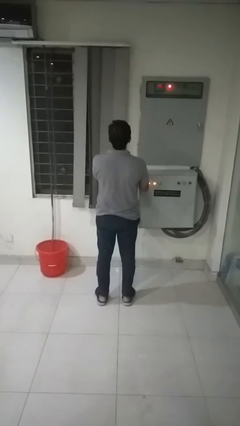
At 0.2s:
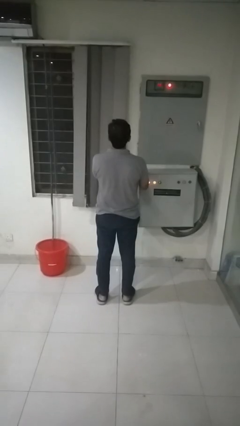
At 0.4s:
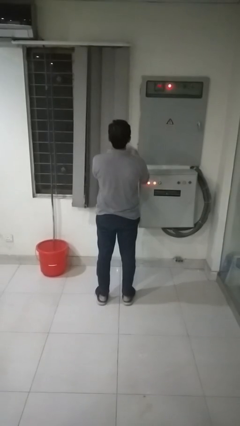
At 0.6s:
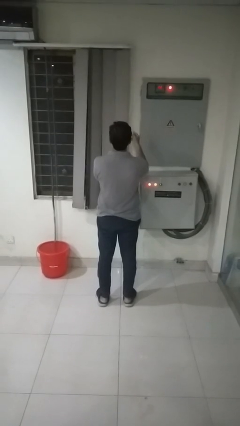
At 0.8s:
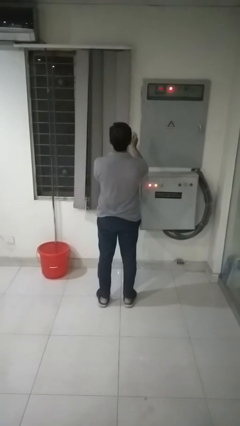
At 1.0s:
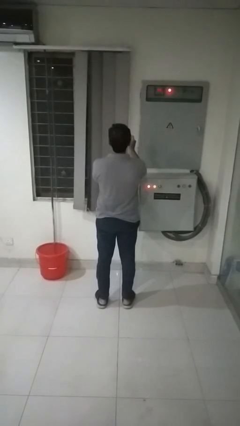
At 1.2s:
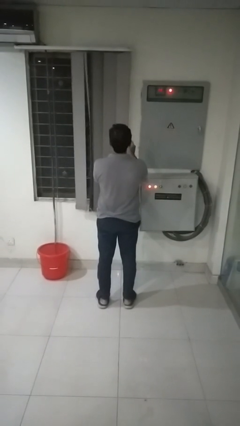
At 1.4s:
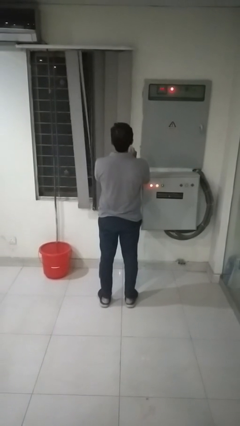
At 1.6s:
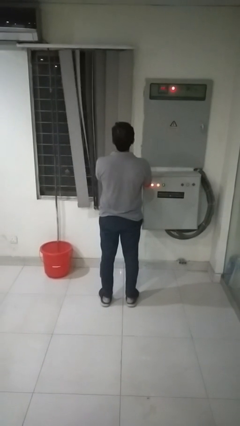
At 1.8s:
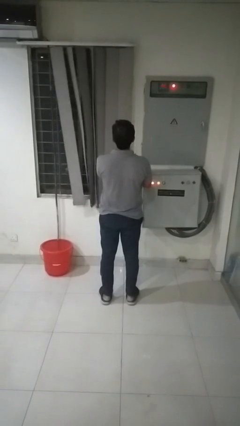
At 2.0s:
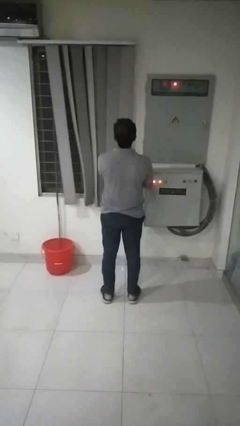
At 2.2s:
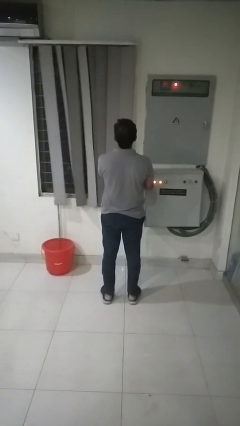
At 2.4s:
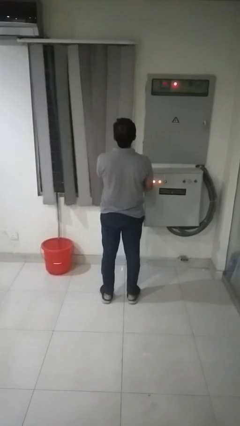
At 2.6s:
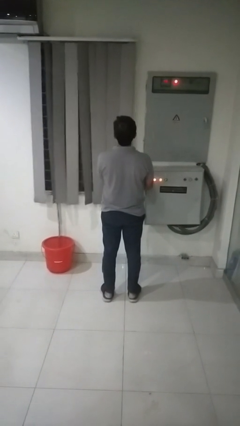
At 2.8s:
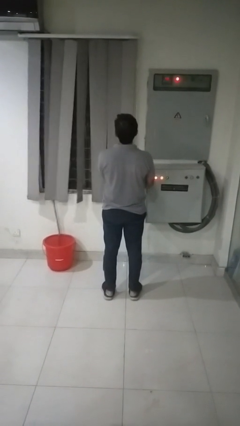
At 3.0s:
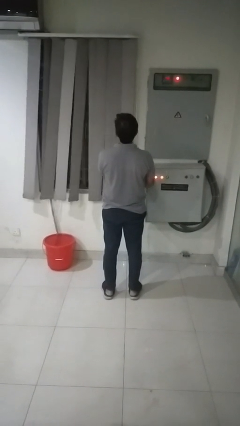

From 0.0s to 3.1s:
person closes curtains

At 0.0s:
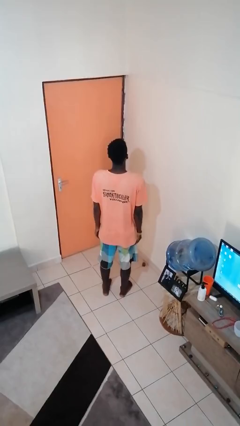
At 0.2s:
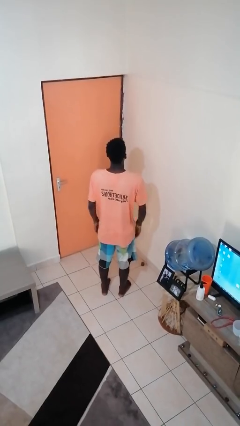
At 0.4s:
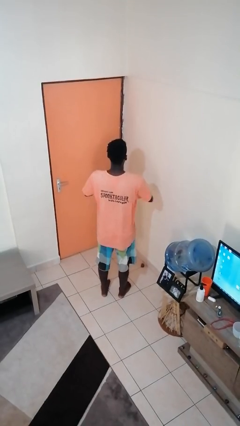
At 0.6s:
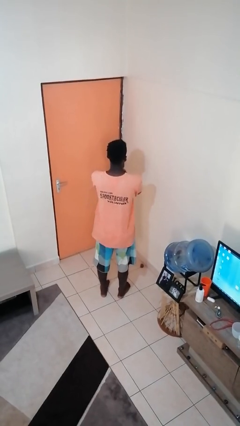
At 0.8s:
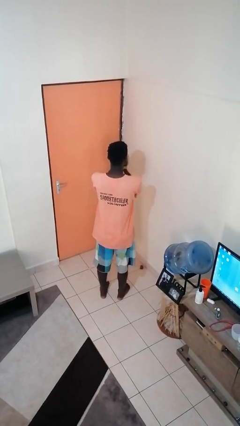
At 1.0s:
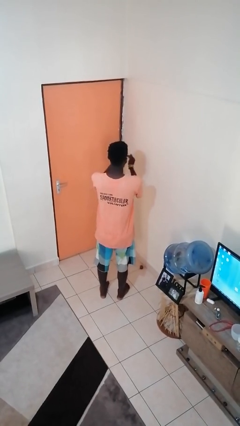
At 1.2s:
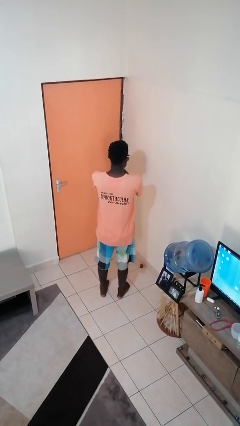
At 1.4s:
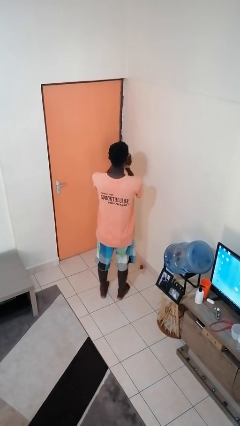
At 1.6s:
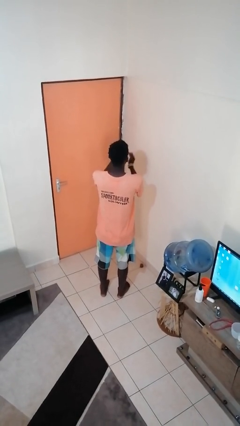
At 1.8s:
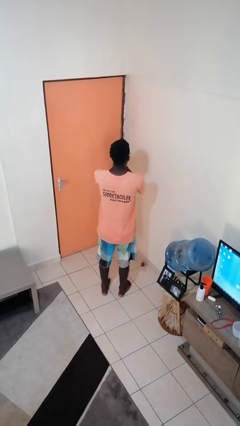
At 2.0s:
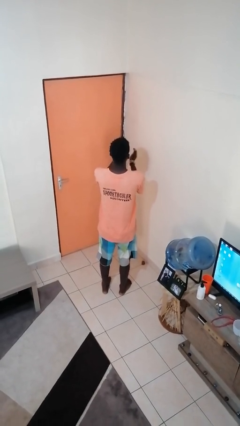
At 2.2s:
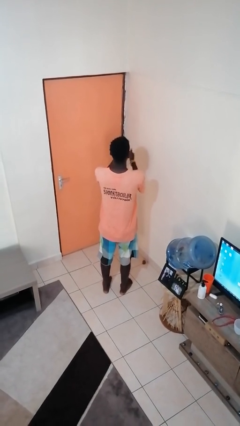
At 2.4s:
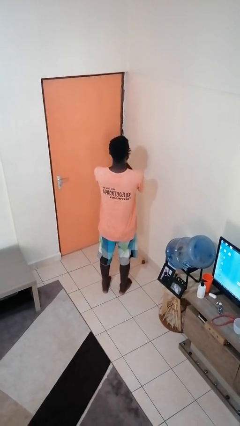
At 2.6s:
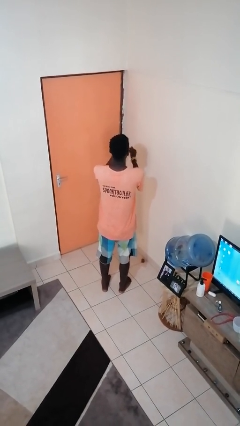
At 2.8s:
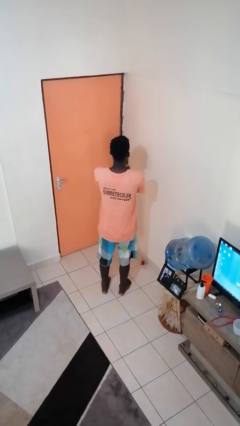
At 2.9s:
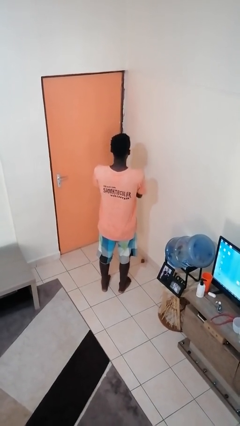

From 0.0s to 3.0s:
person claps hands

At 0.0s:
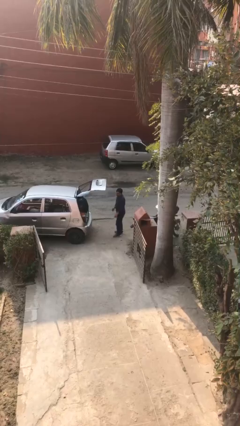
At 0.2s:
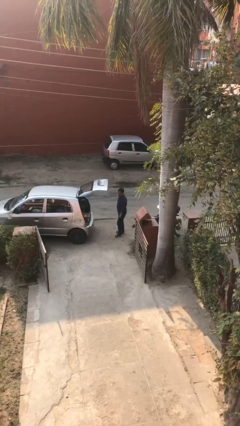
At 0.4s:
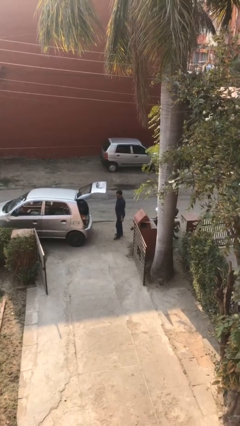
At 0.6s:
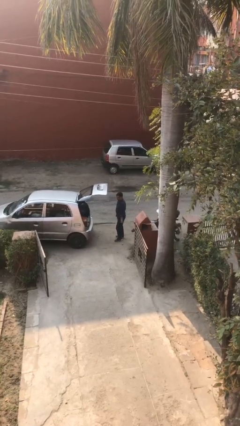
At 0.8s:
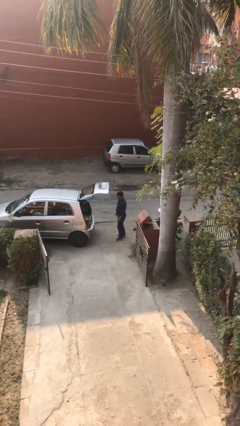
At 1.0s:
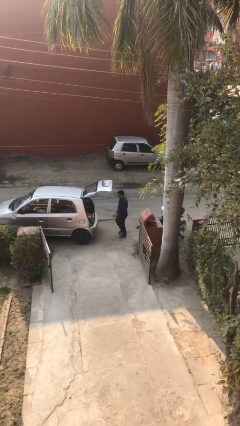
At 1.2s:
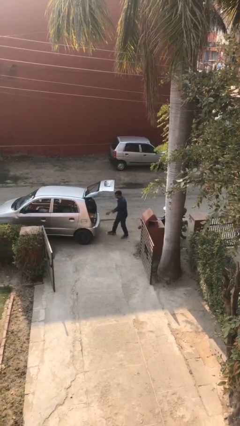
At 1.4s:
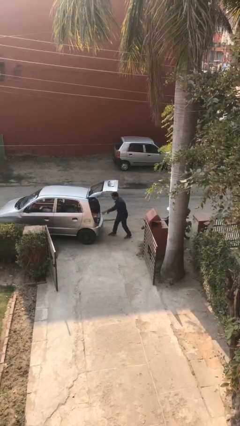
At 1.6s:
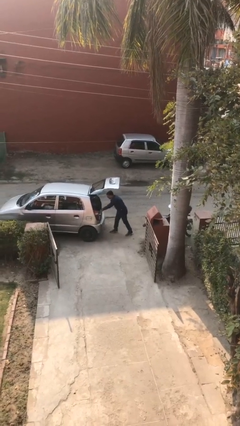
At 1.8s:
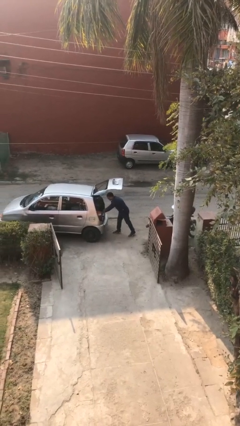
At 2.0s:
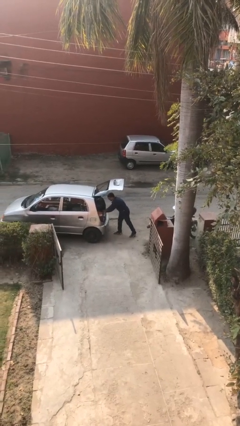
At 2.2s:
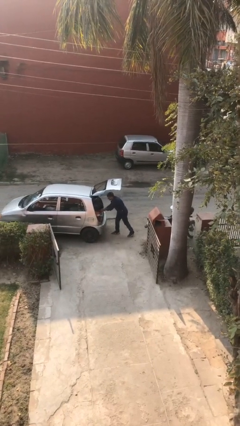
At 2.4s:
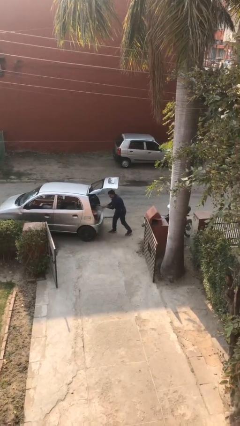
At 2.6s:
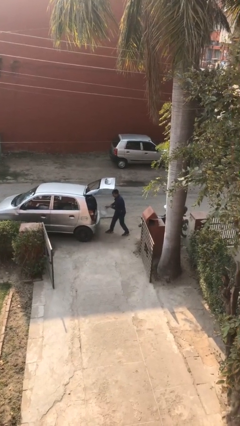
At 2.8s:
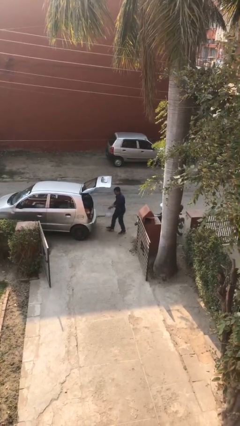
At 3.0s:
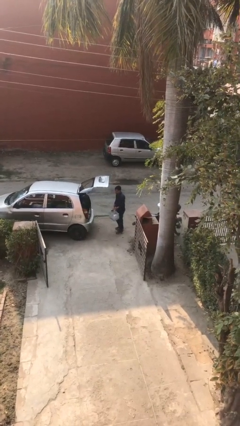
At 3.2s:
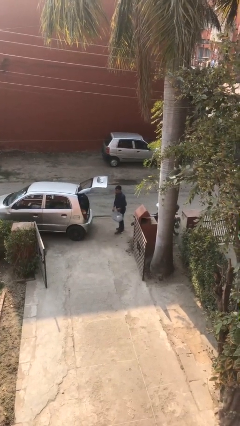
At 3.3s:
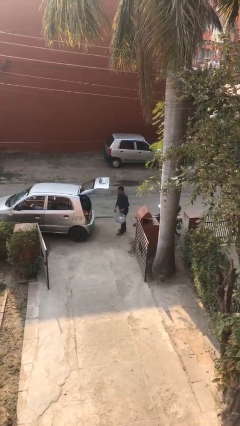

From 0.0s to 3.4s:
person unloads car

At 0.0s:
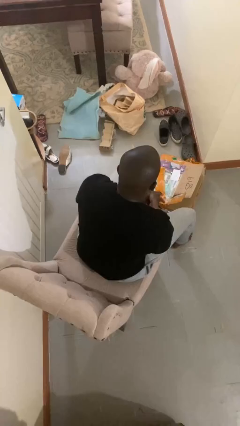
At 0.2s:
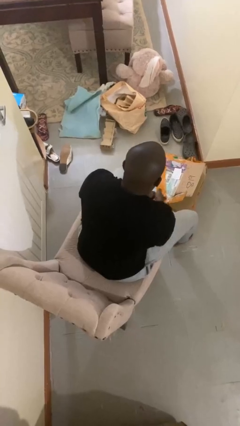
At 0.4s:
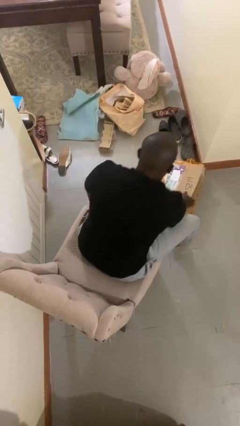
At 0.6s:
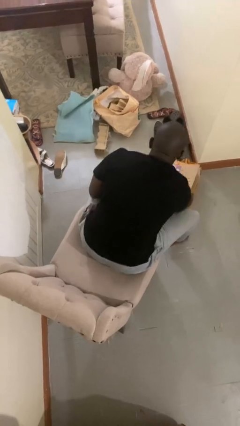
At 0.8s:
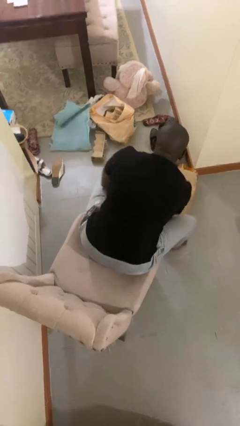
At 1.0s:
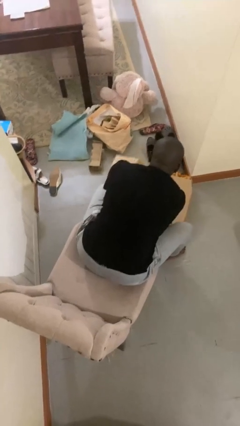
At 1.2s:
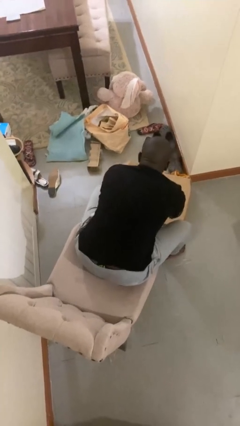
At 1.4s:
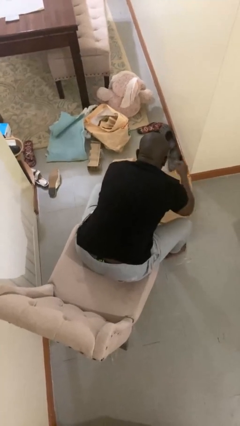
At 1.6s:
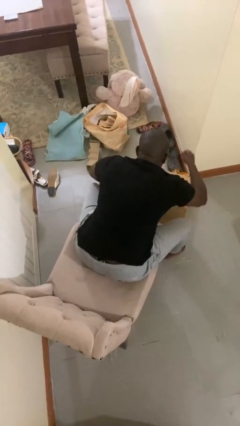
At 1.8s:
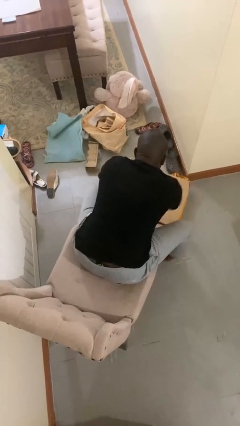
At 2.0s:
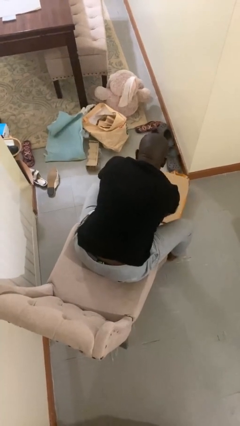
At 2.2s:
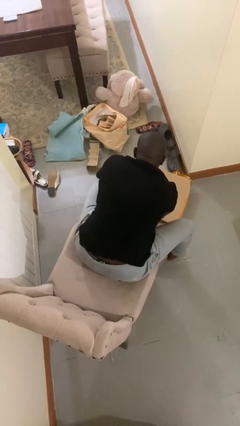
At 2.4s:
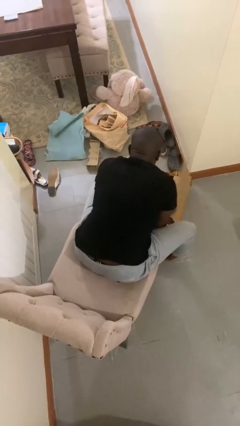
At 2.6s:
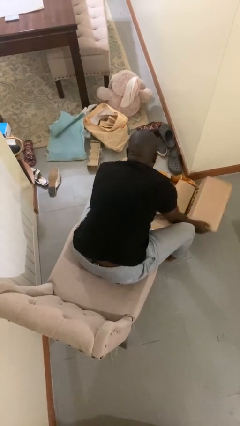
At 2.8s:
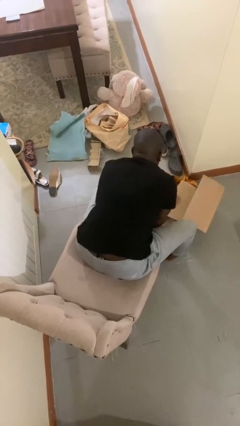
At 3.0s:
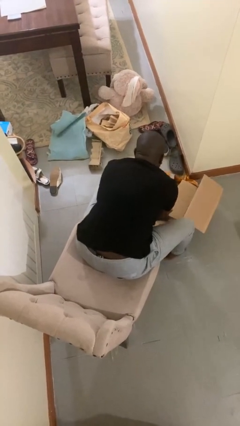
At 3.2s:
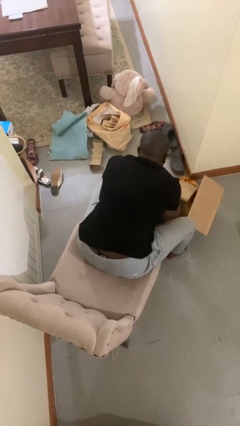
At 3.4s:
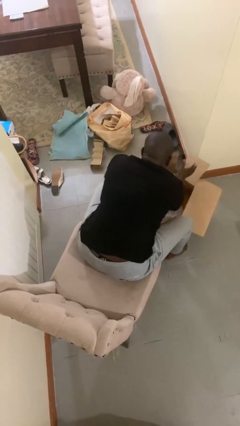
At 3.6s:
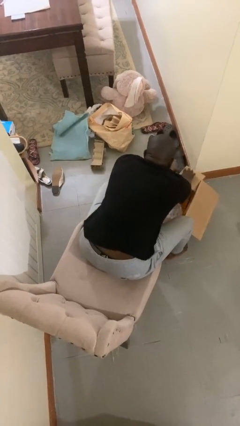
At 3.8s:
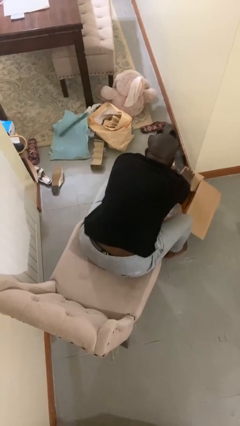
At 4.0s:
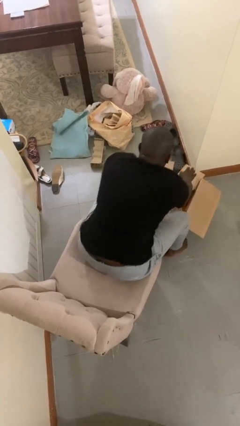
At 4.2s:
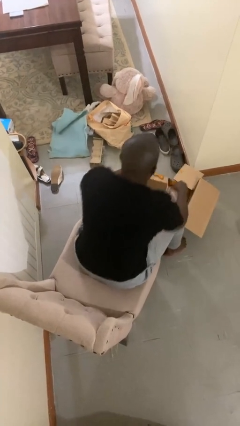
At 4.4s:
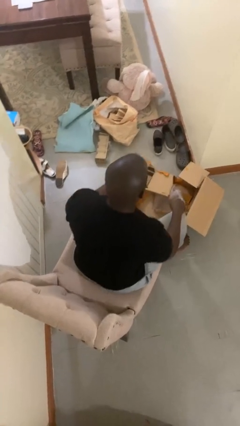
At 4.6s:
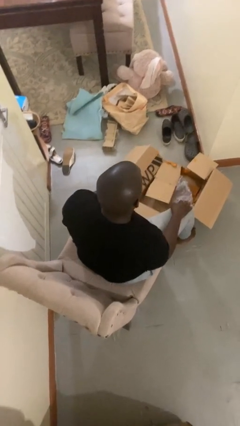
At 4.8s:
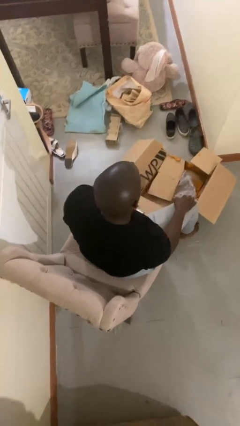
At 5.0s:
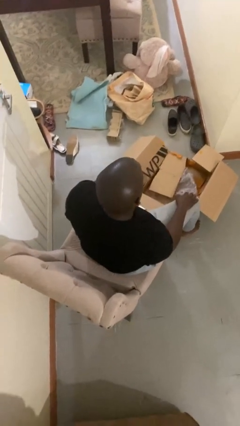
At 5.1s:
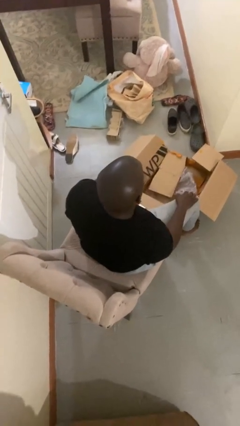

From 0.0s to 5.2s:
person opens box

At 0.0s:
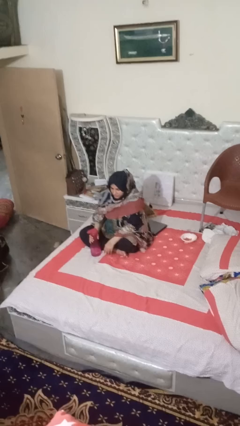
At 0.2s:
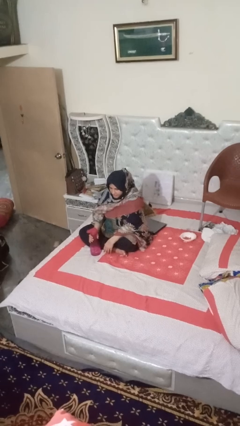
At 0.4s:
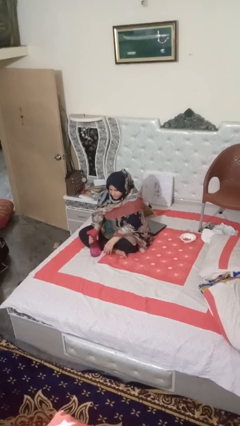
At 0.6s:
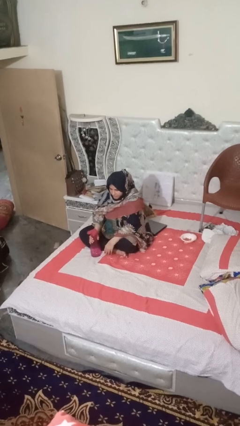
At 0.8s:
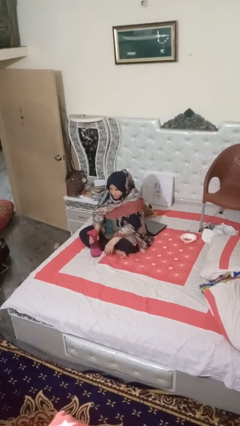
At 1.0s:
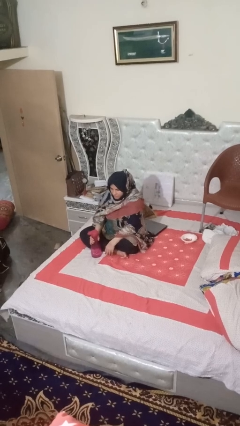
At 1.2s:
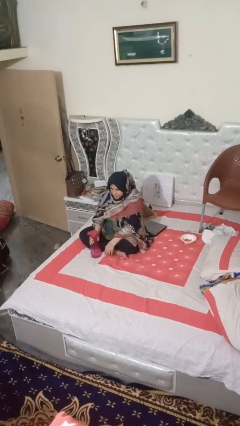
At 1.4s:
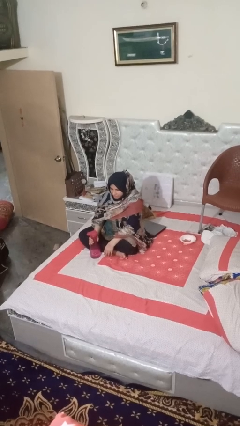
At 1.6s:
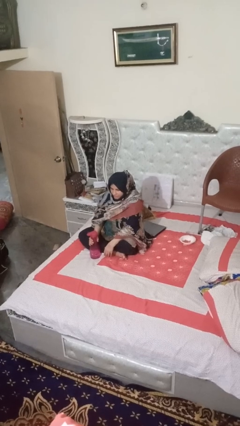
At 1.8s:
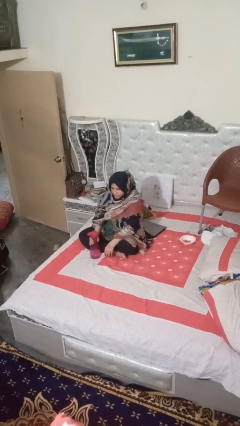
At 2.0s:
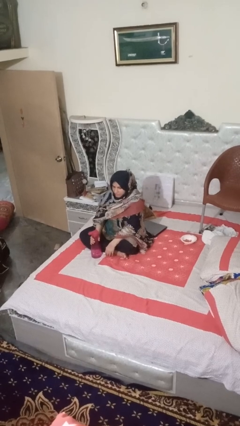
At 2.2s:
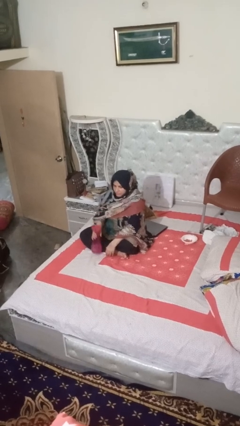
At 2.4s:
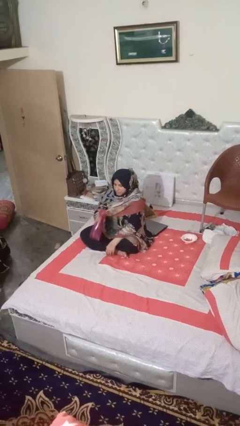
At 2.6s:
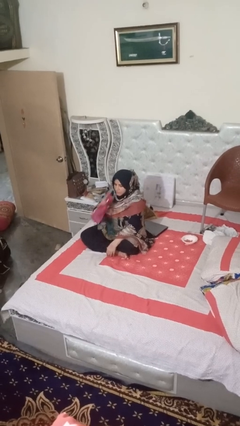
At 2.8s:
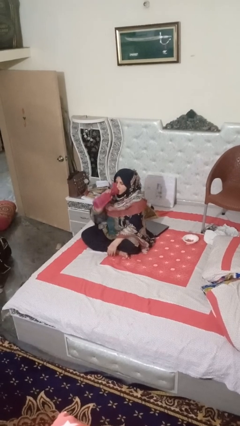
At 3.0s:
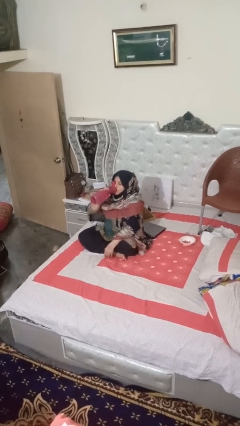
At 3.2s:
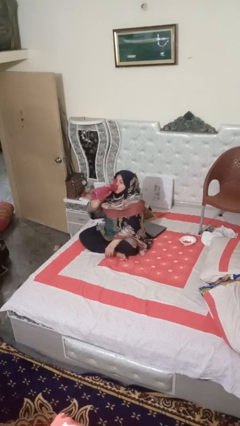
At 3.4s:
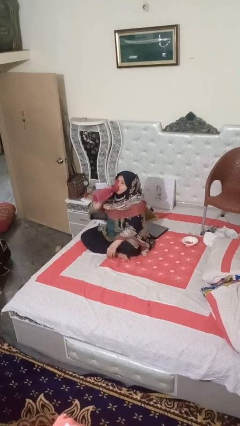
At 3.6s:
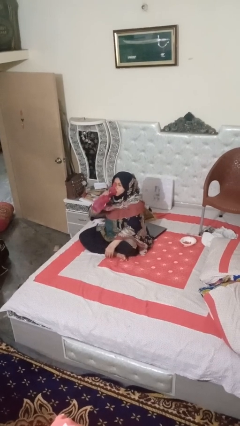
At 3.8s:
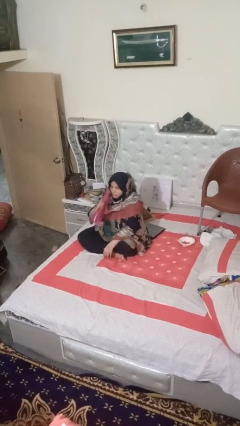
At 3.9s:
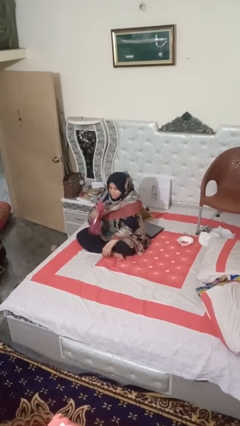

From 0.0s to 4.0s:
person drinks from bottle
